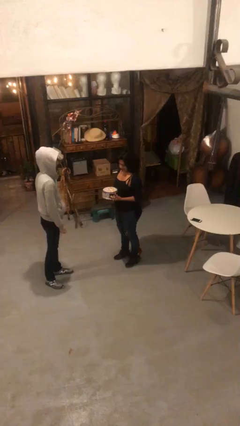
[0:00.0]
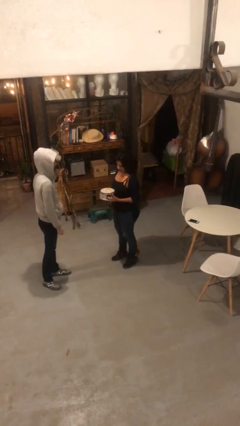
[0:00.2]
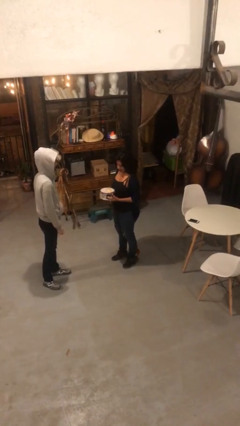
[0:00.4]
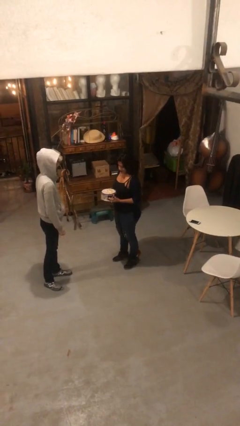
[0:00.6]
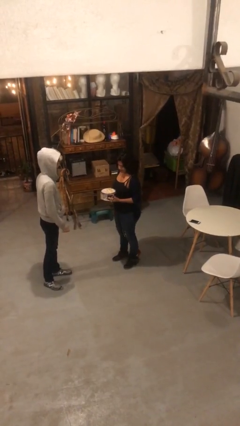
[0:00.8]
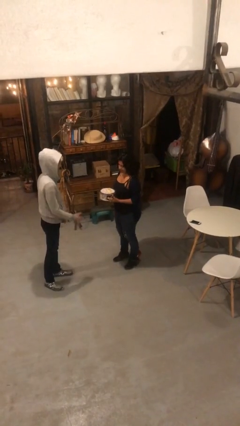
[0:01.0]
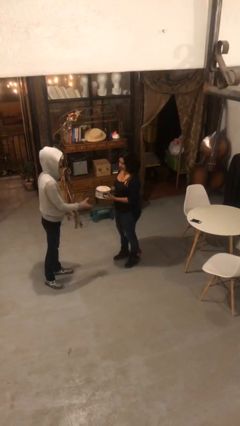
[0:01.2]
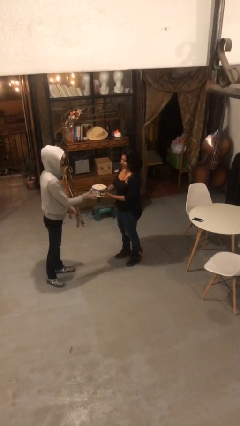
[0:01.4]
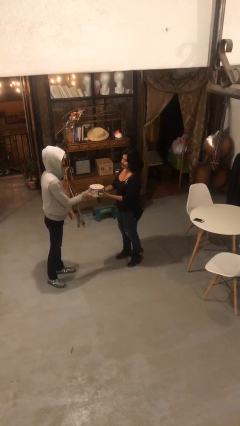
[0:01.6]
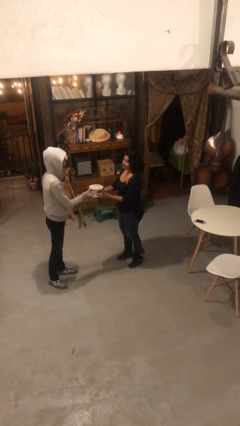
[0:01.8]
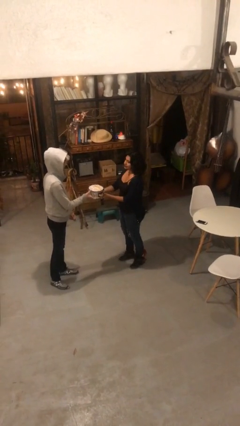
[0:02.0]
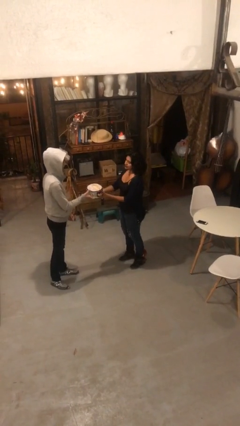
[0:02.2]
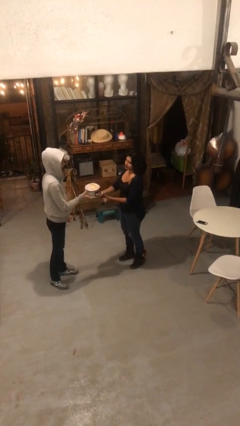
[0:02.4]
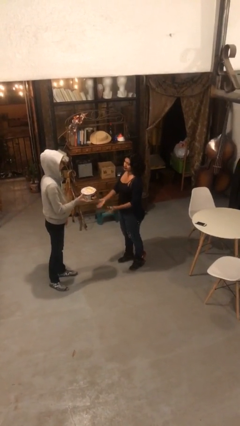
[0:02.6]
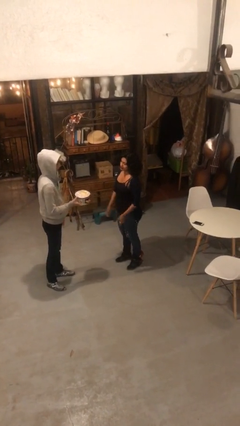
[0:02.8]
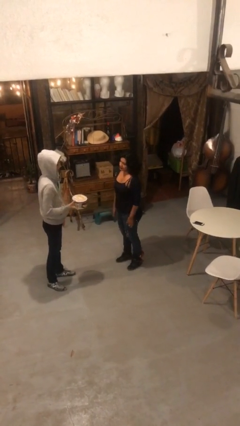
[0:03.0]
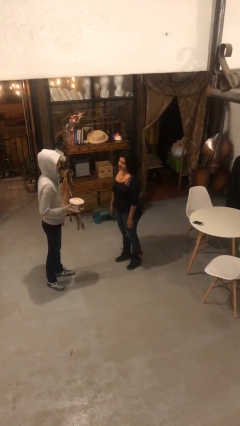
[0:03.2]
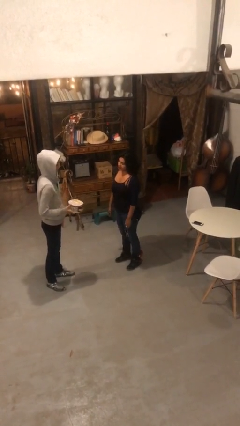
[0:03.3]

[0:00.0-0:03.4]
person transfers object to person

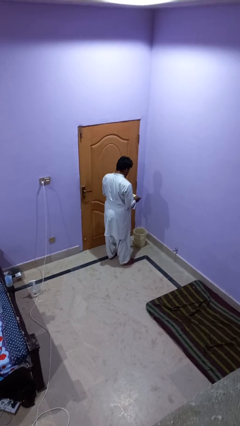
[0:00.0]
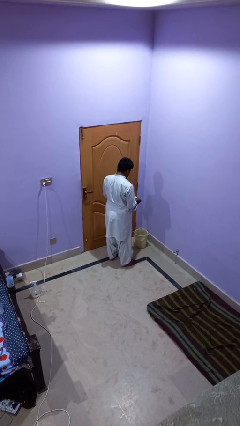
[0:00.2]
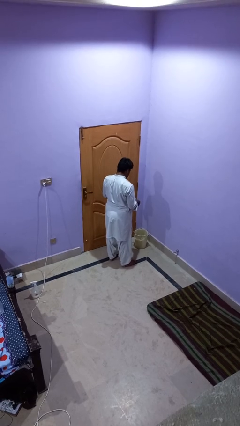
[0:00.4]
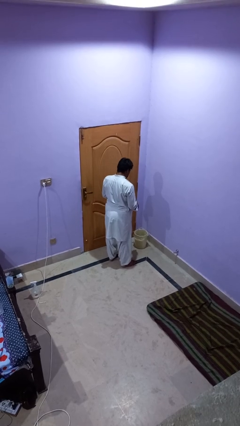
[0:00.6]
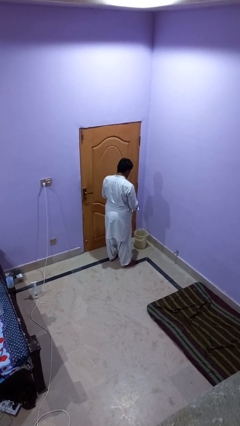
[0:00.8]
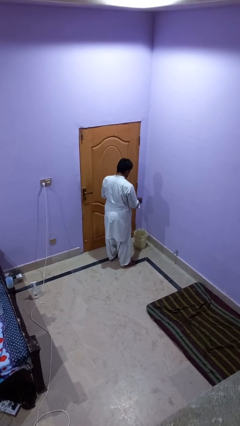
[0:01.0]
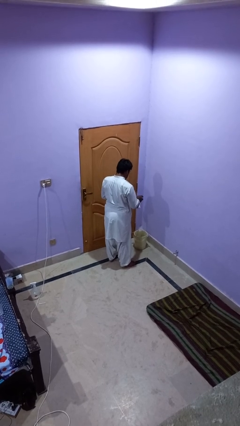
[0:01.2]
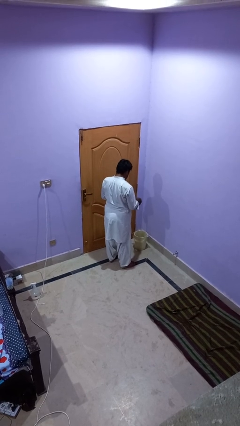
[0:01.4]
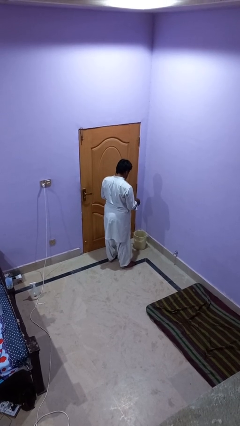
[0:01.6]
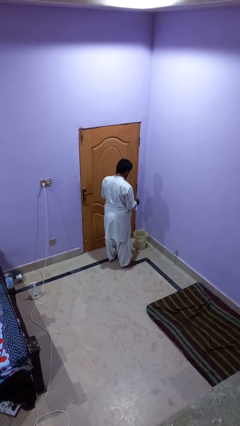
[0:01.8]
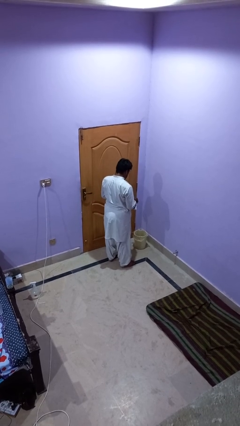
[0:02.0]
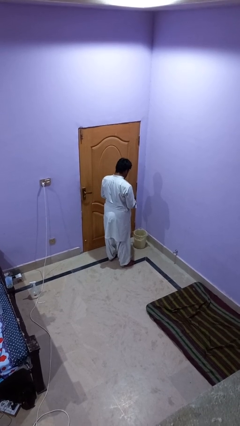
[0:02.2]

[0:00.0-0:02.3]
person discards trash

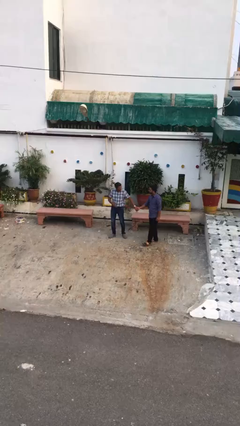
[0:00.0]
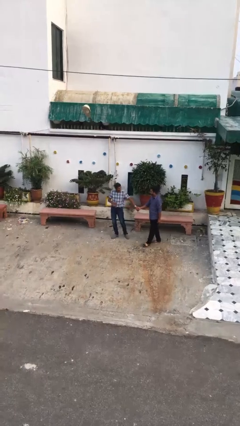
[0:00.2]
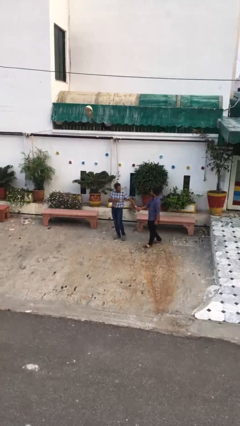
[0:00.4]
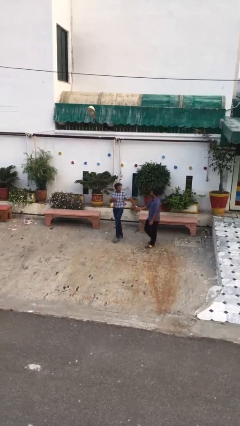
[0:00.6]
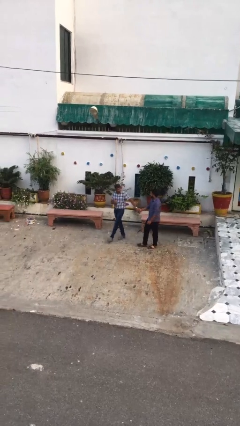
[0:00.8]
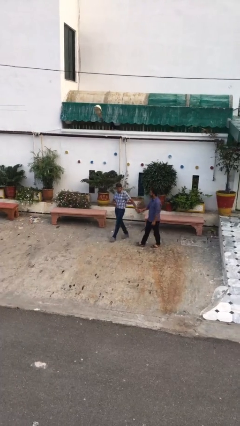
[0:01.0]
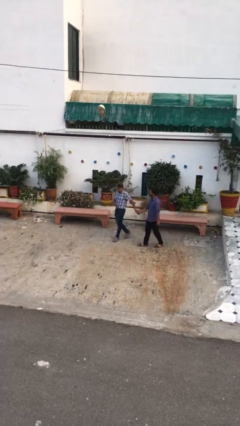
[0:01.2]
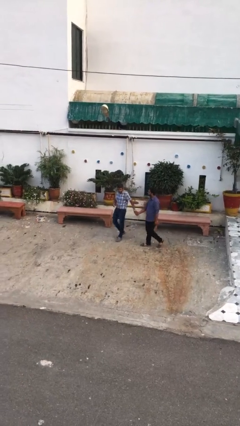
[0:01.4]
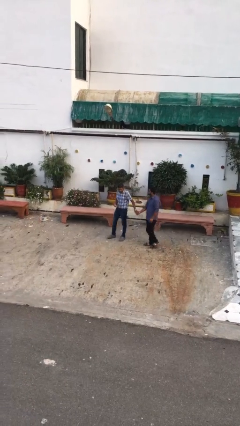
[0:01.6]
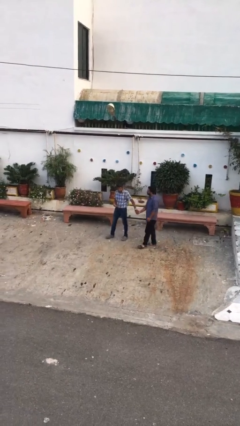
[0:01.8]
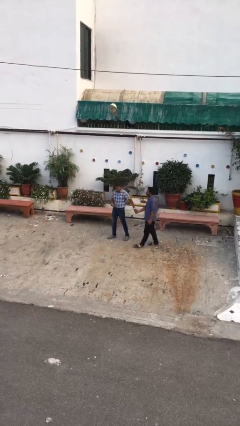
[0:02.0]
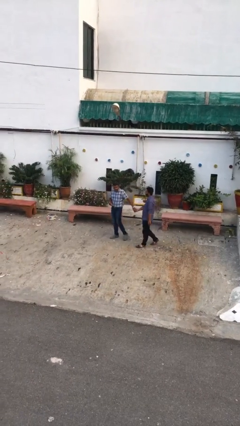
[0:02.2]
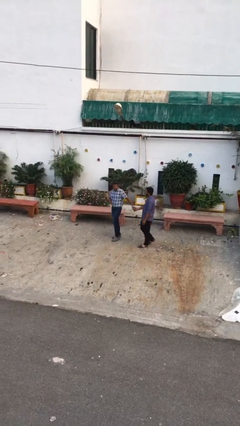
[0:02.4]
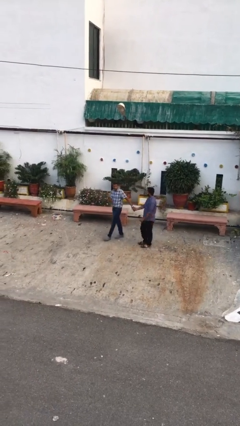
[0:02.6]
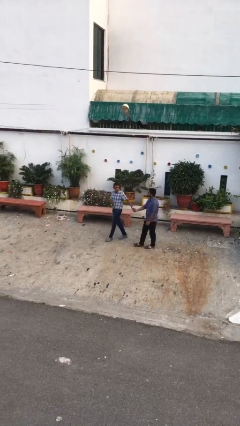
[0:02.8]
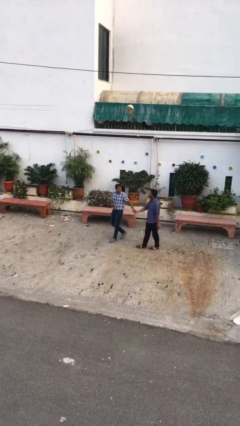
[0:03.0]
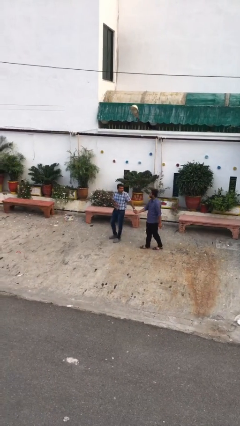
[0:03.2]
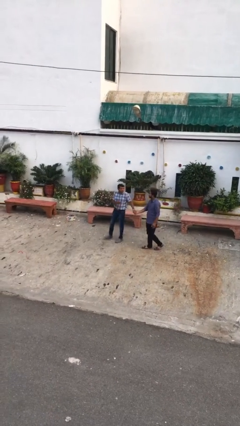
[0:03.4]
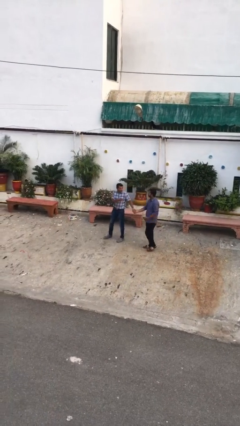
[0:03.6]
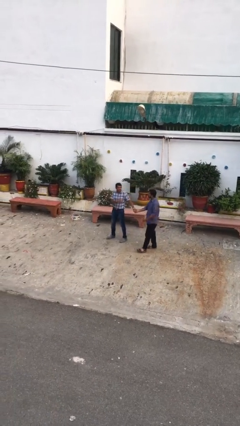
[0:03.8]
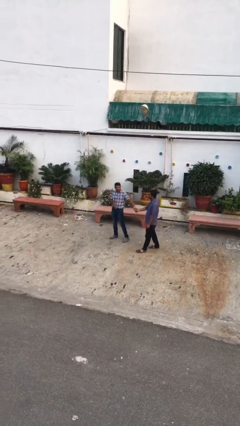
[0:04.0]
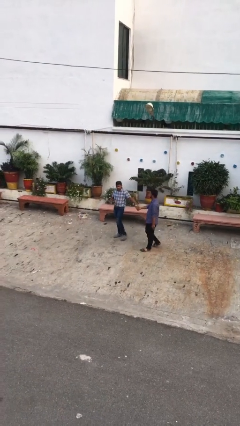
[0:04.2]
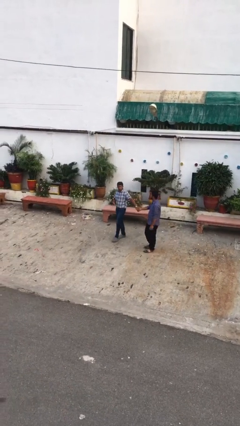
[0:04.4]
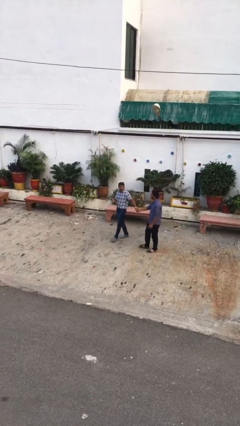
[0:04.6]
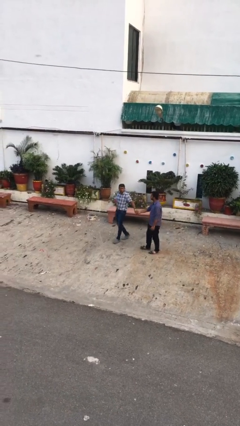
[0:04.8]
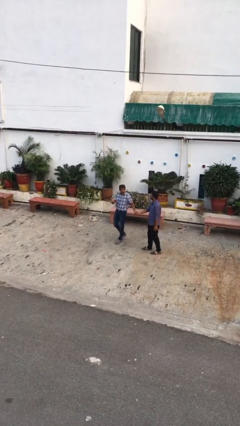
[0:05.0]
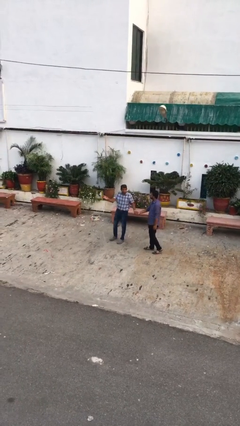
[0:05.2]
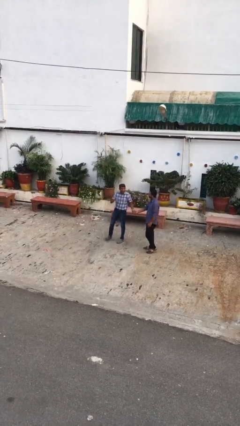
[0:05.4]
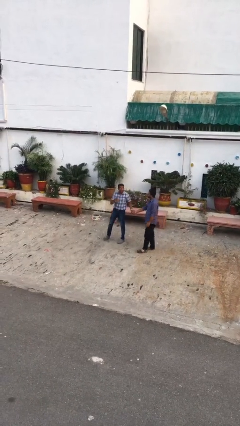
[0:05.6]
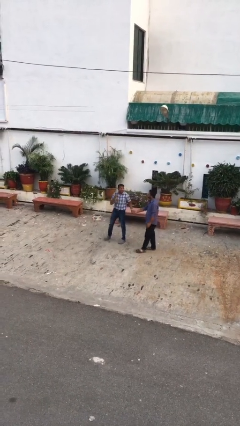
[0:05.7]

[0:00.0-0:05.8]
person holds hand

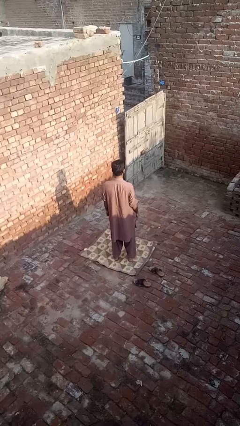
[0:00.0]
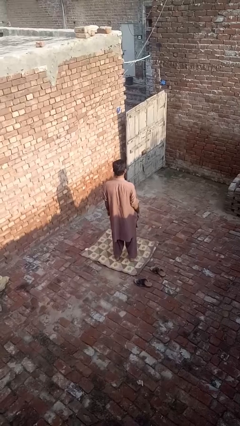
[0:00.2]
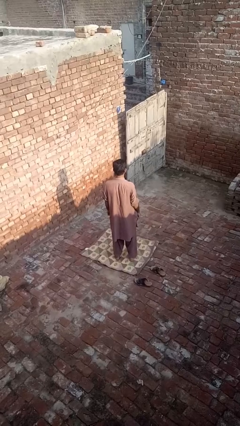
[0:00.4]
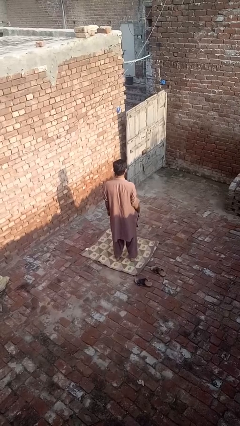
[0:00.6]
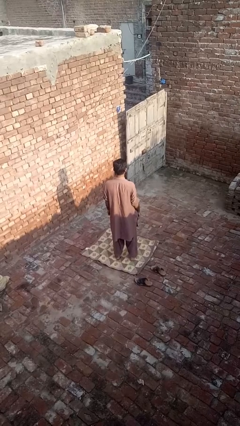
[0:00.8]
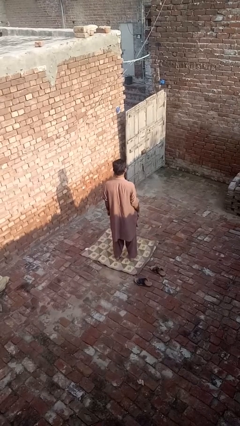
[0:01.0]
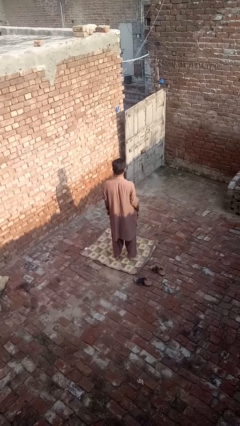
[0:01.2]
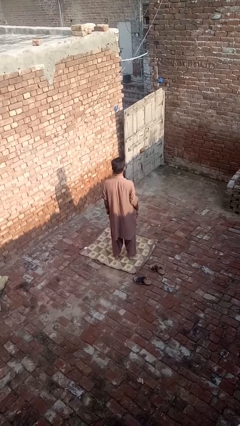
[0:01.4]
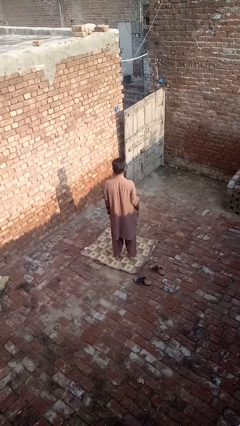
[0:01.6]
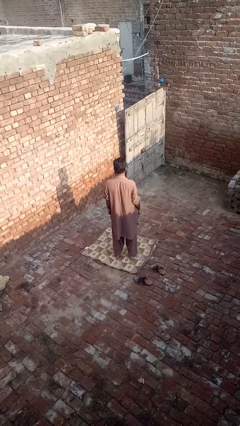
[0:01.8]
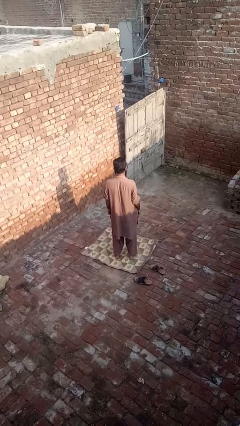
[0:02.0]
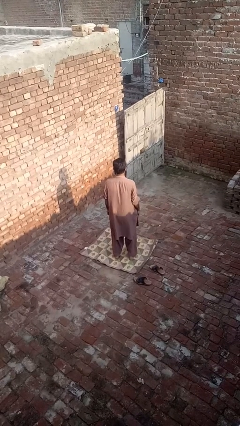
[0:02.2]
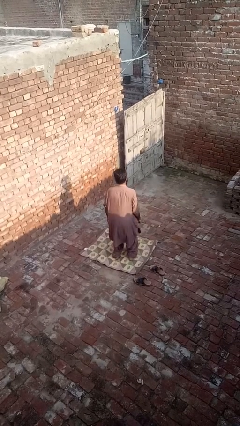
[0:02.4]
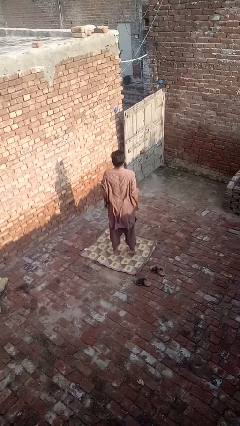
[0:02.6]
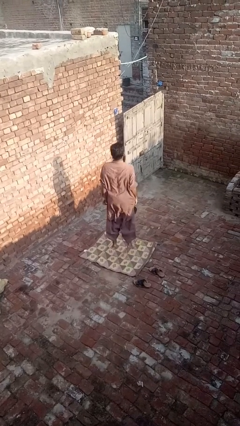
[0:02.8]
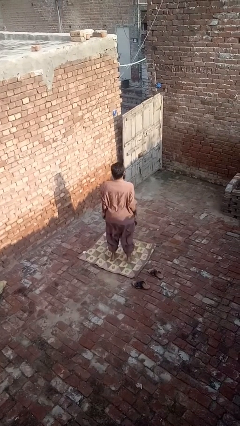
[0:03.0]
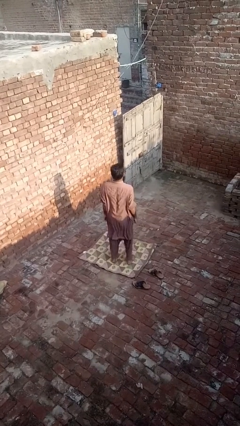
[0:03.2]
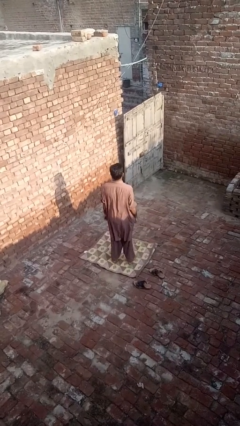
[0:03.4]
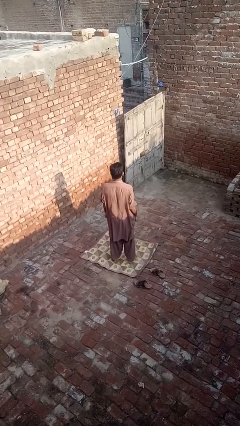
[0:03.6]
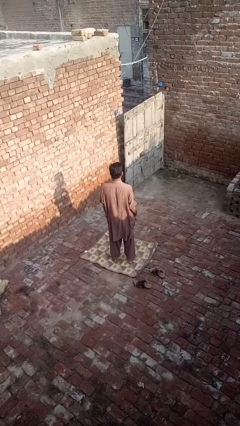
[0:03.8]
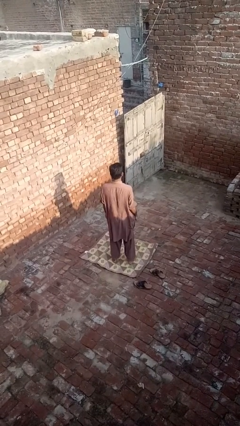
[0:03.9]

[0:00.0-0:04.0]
person jumps

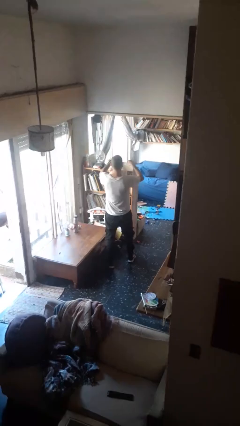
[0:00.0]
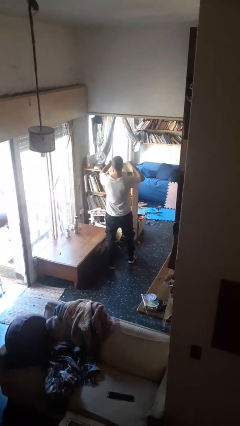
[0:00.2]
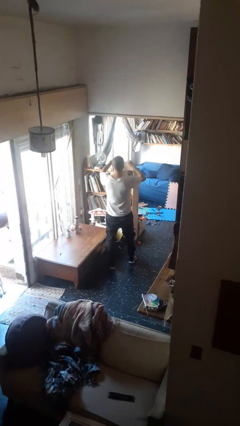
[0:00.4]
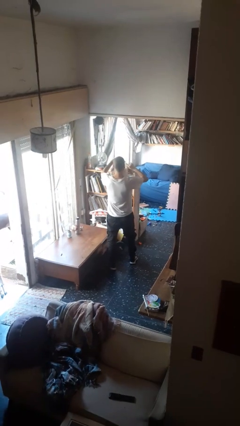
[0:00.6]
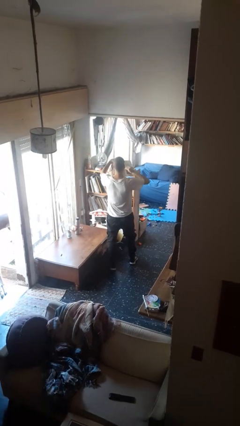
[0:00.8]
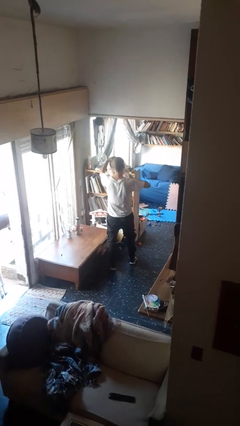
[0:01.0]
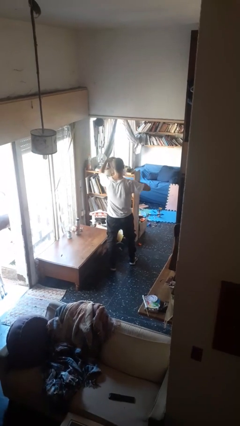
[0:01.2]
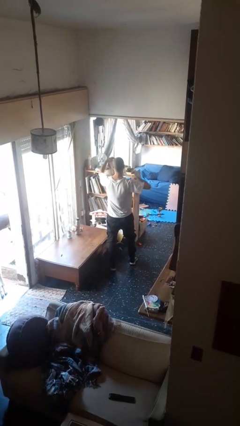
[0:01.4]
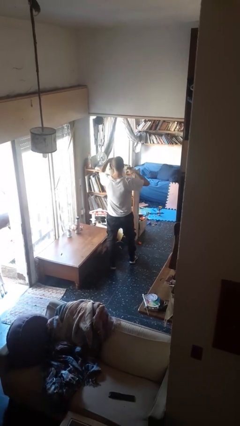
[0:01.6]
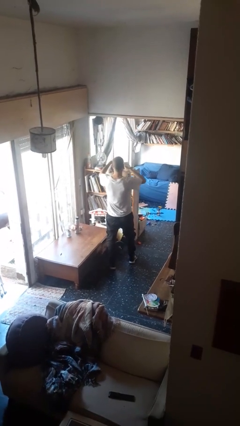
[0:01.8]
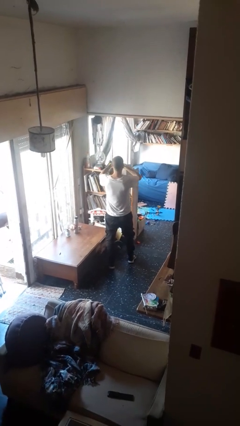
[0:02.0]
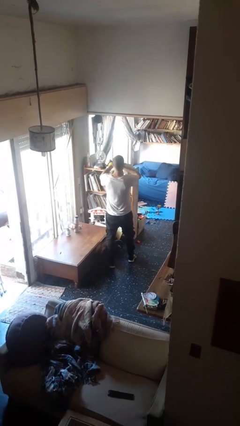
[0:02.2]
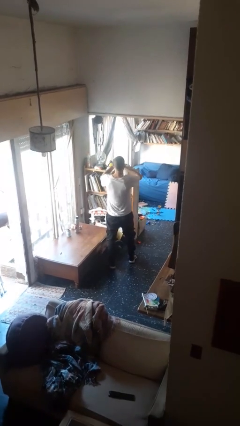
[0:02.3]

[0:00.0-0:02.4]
person tears paper
